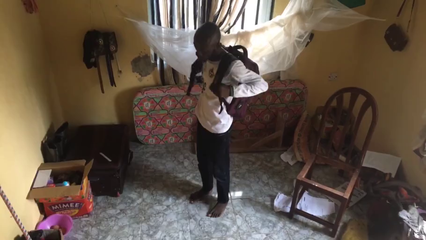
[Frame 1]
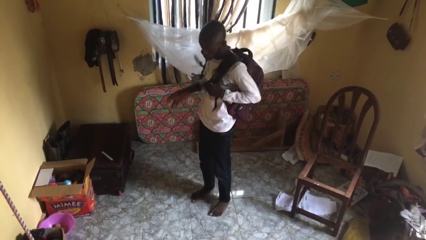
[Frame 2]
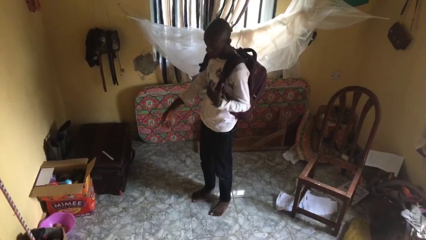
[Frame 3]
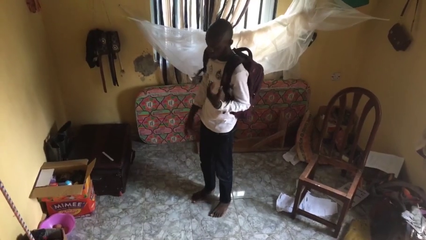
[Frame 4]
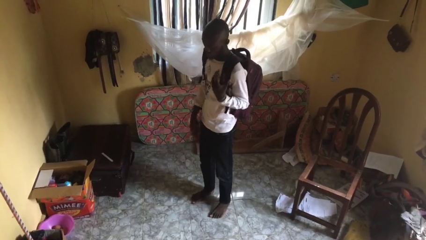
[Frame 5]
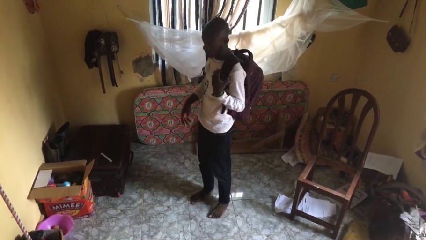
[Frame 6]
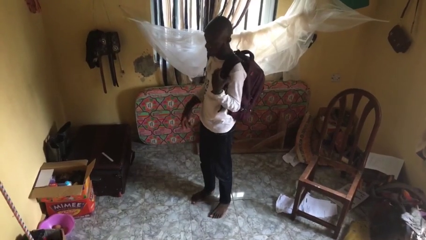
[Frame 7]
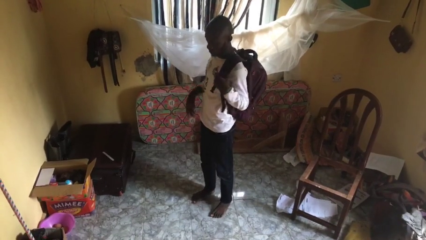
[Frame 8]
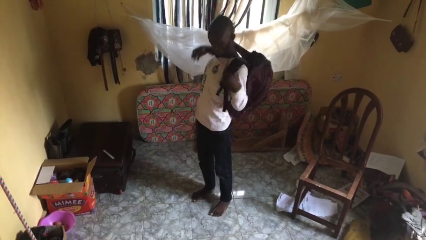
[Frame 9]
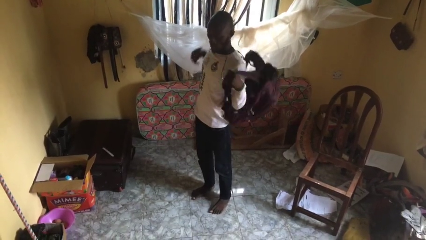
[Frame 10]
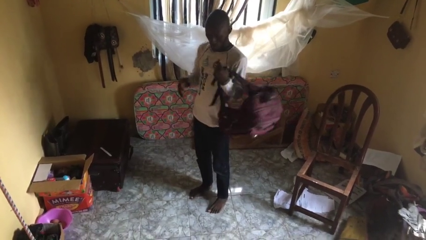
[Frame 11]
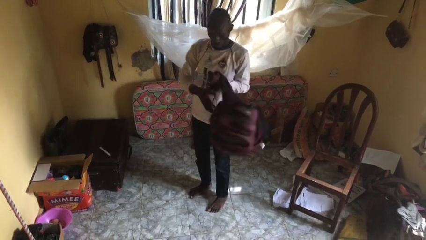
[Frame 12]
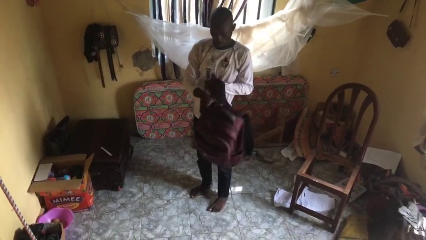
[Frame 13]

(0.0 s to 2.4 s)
person takes off backpack

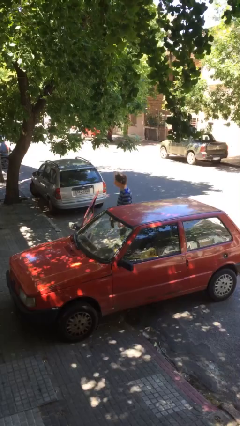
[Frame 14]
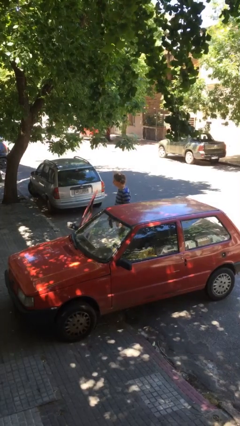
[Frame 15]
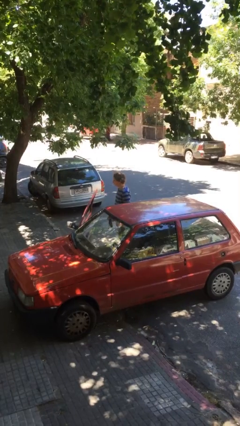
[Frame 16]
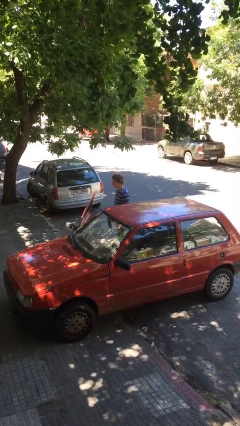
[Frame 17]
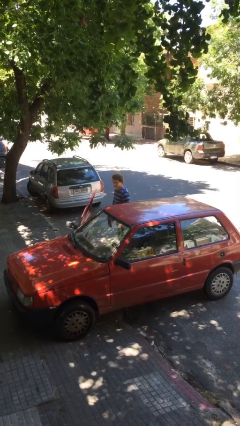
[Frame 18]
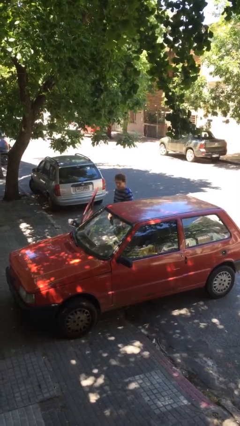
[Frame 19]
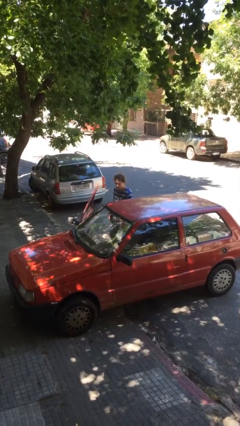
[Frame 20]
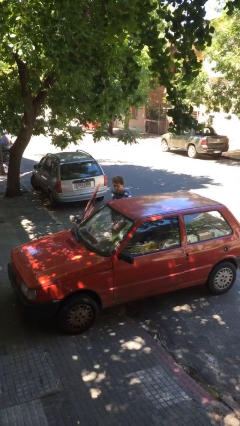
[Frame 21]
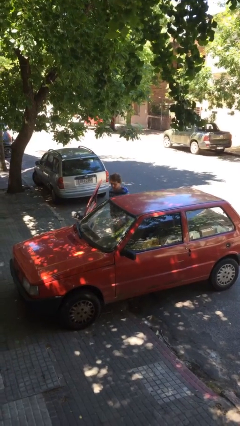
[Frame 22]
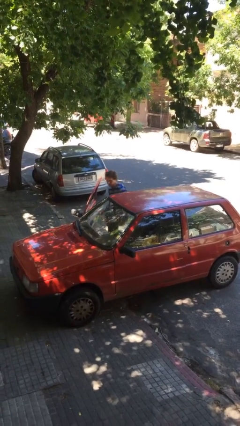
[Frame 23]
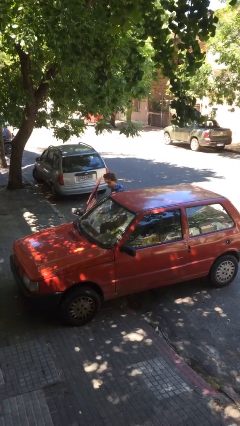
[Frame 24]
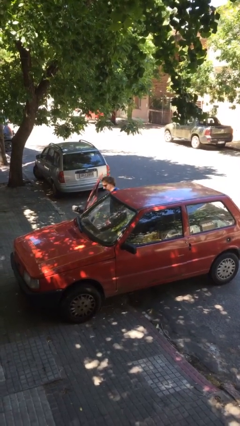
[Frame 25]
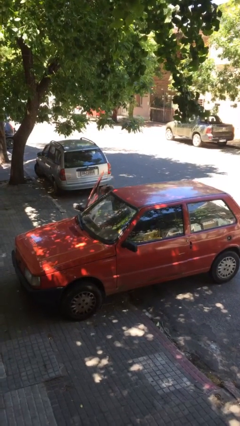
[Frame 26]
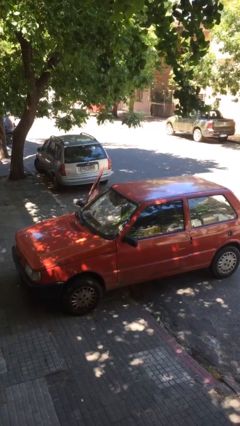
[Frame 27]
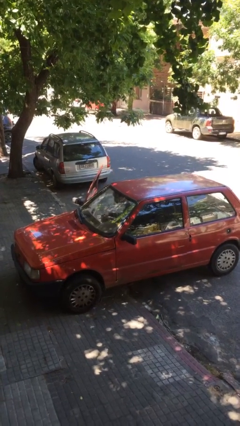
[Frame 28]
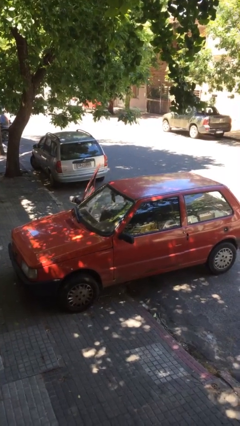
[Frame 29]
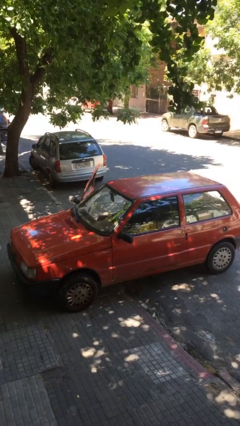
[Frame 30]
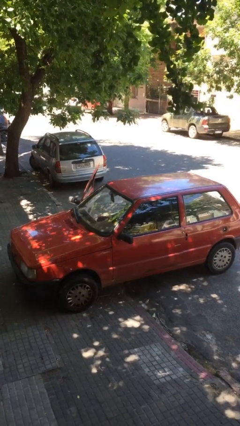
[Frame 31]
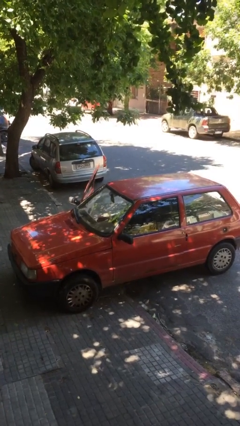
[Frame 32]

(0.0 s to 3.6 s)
person enters car

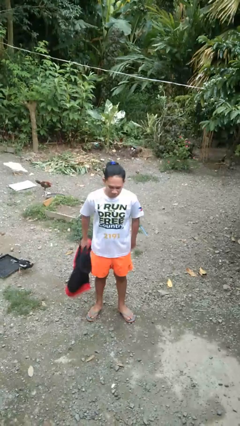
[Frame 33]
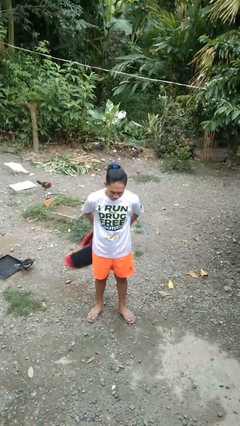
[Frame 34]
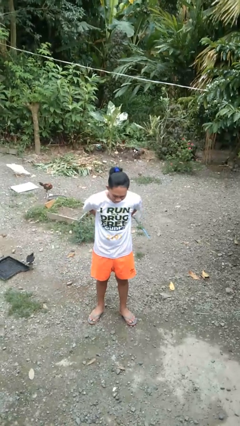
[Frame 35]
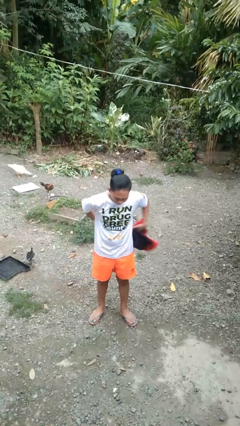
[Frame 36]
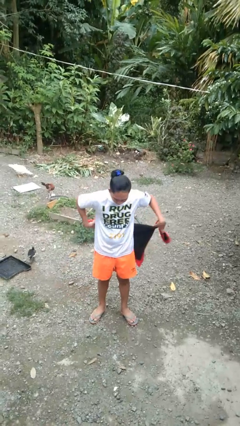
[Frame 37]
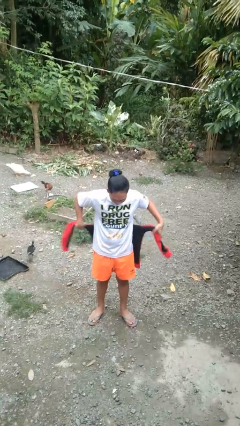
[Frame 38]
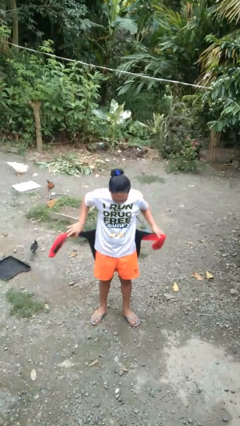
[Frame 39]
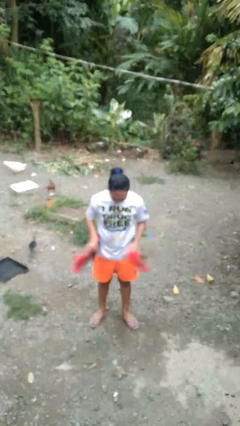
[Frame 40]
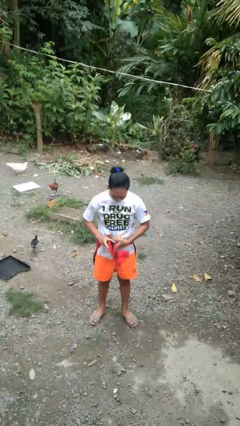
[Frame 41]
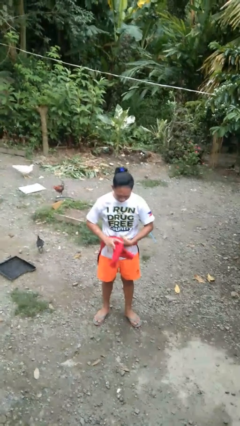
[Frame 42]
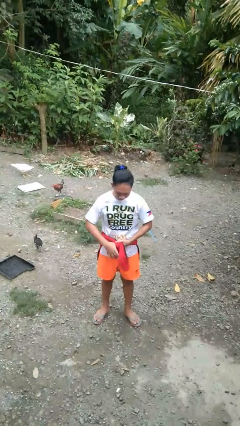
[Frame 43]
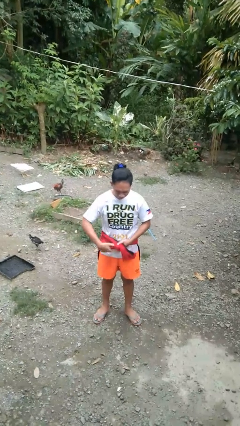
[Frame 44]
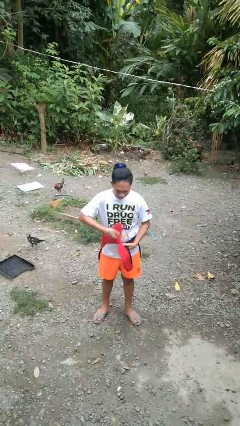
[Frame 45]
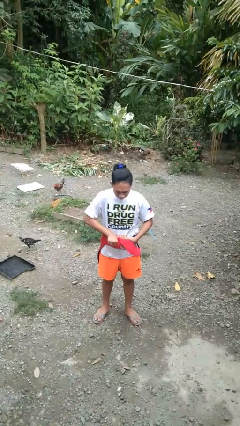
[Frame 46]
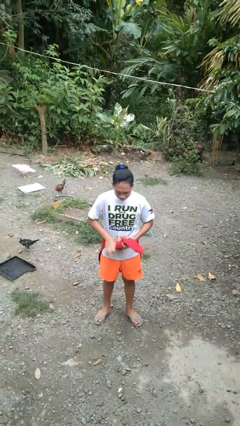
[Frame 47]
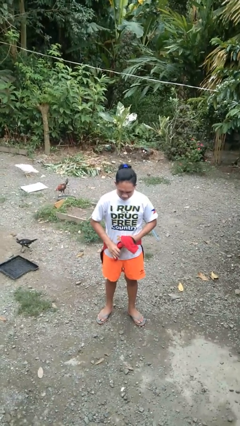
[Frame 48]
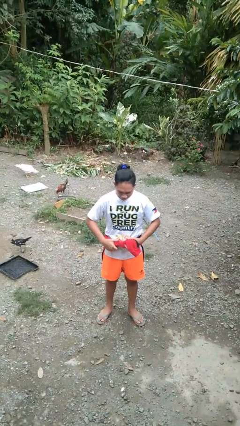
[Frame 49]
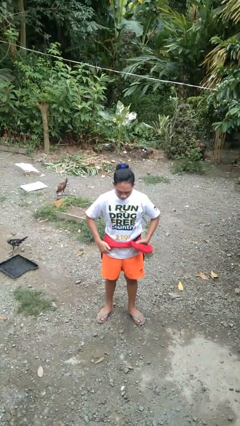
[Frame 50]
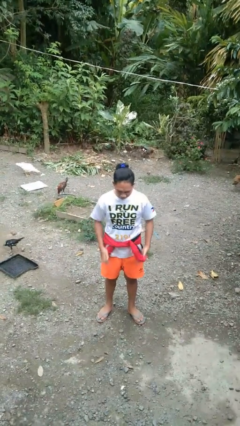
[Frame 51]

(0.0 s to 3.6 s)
person ties jacket around waist

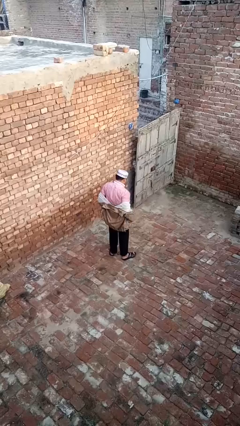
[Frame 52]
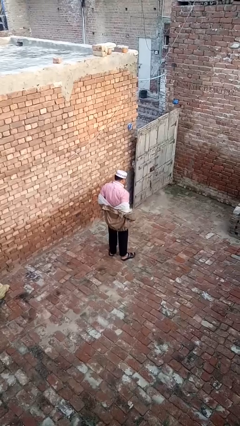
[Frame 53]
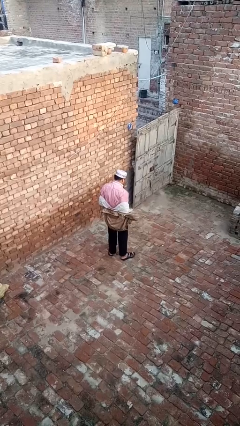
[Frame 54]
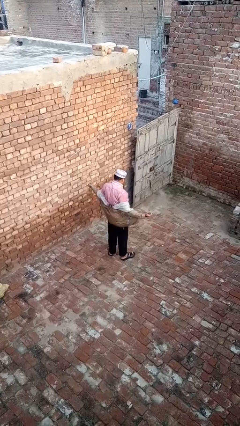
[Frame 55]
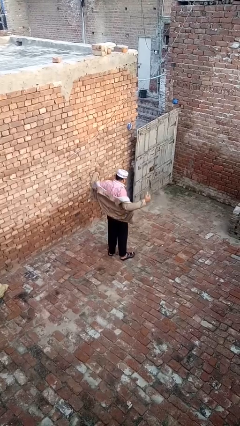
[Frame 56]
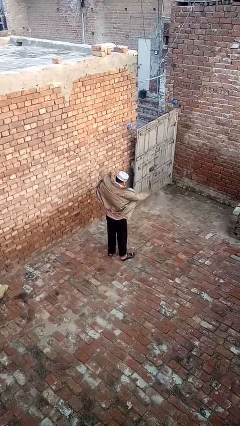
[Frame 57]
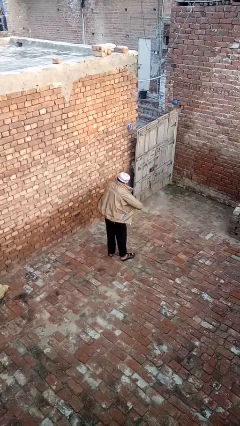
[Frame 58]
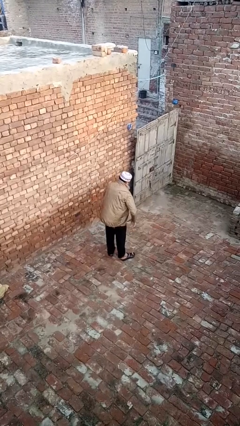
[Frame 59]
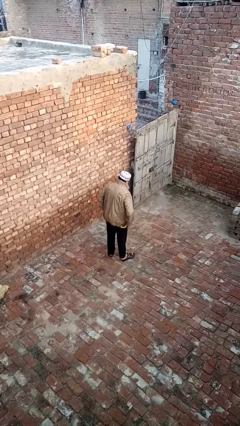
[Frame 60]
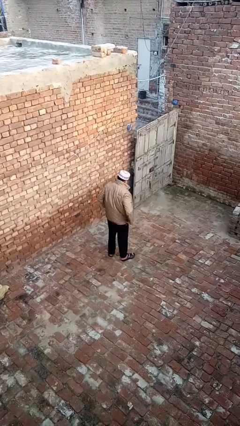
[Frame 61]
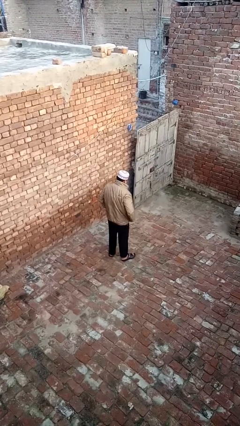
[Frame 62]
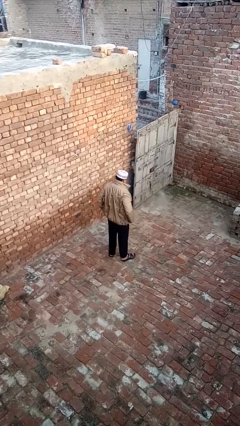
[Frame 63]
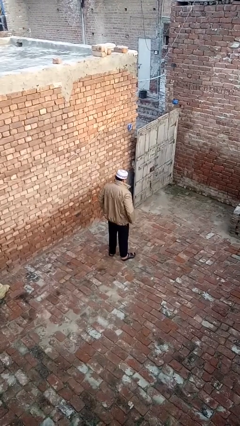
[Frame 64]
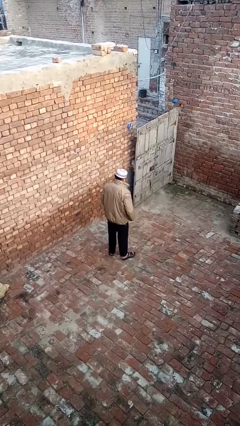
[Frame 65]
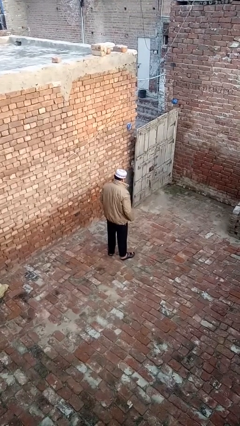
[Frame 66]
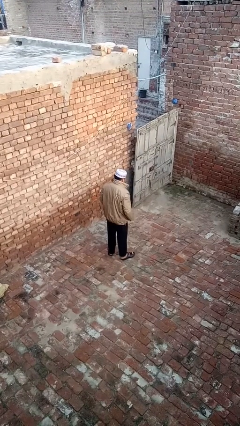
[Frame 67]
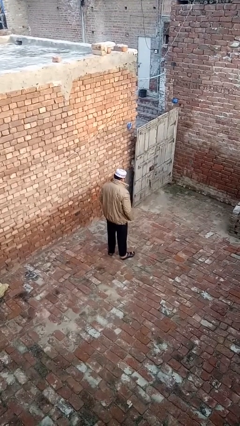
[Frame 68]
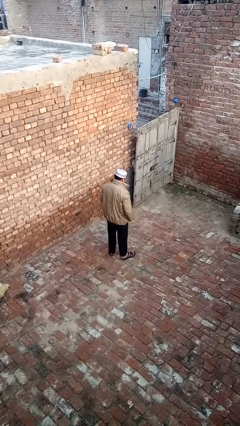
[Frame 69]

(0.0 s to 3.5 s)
person puts on jacket

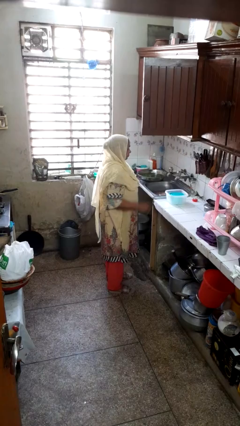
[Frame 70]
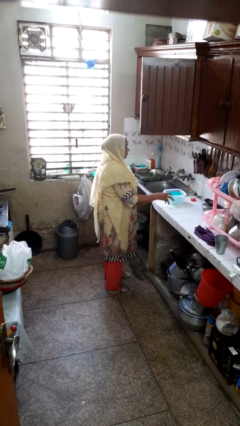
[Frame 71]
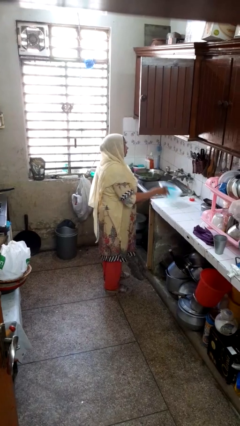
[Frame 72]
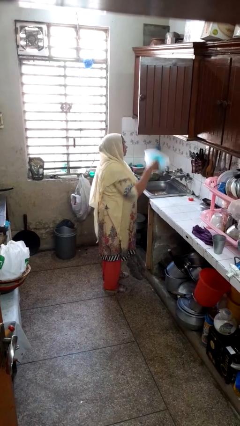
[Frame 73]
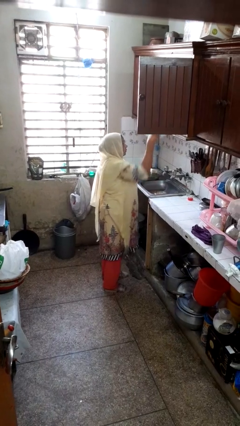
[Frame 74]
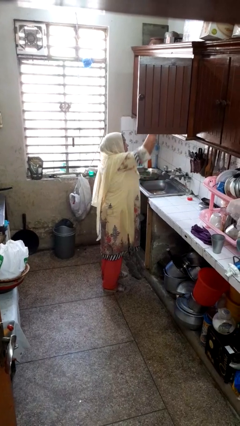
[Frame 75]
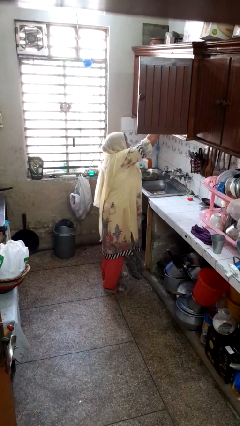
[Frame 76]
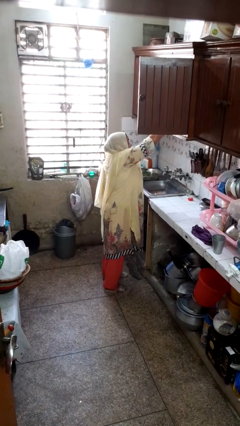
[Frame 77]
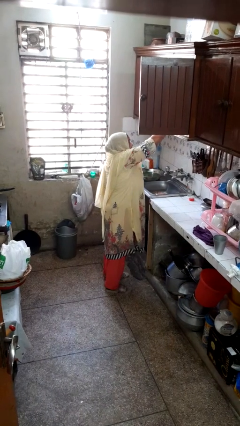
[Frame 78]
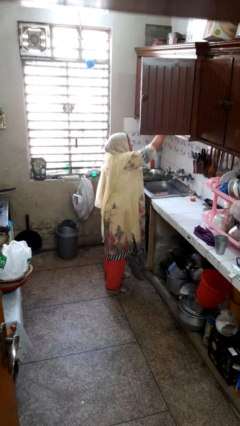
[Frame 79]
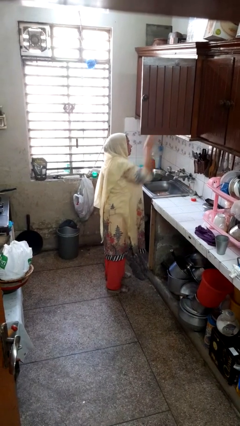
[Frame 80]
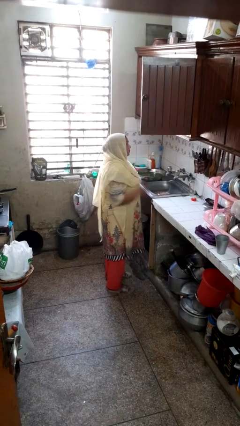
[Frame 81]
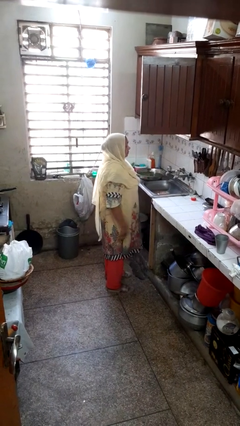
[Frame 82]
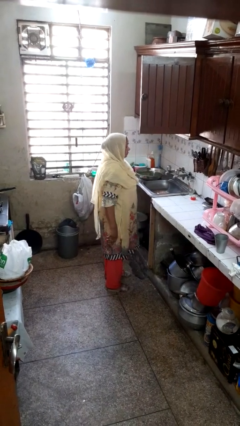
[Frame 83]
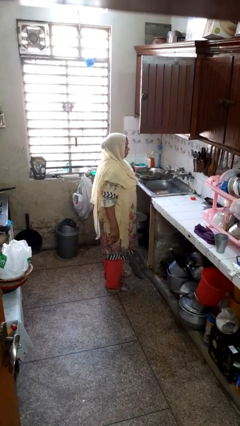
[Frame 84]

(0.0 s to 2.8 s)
person puts object in cabinet

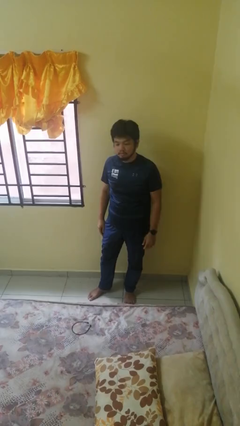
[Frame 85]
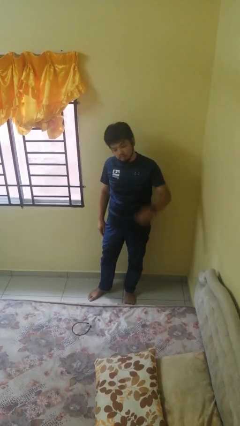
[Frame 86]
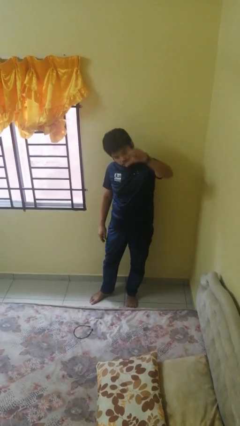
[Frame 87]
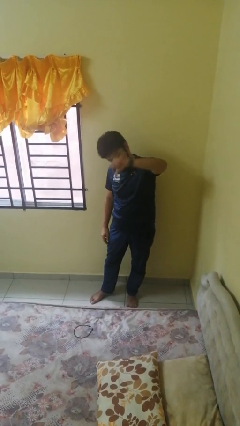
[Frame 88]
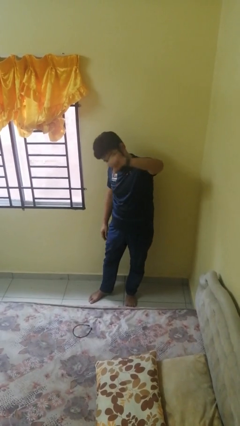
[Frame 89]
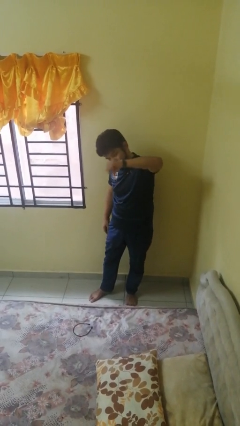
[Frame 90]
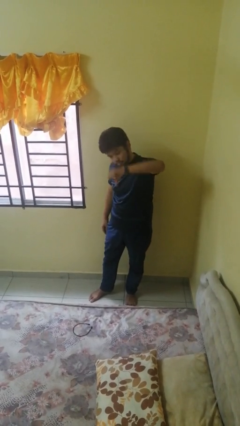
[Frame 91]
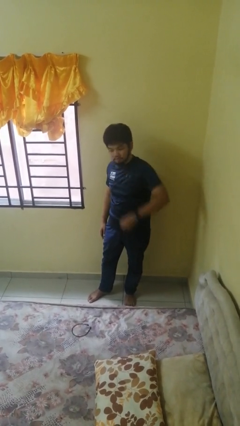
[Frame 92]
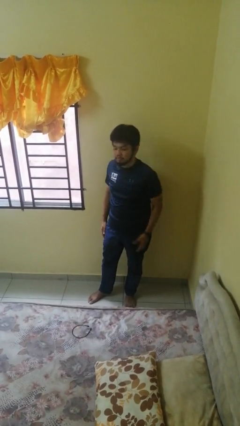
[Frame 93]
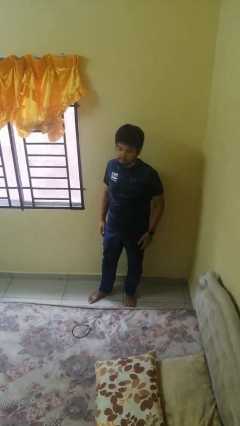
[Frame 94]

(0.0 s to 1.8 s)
person gestures thumbs down
